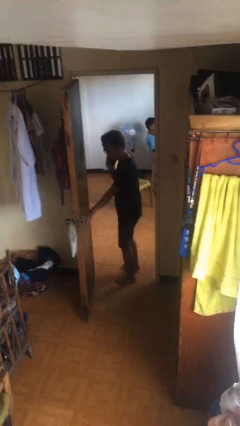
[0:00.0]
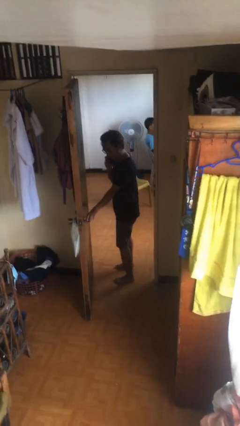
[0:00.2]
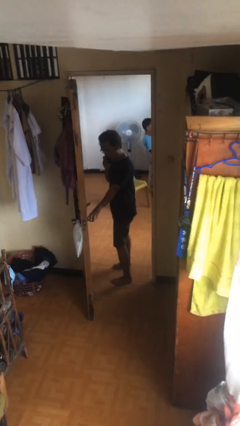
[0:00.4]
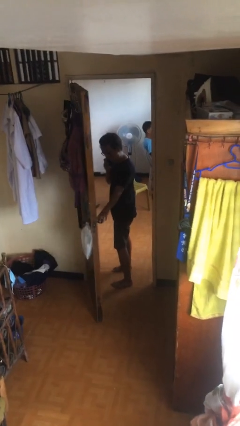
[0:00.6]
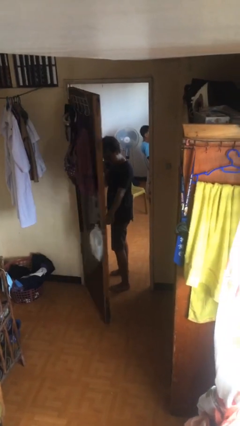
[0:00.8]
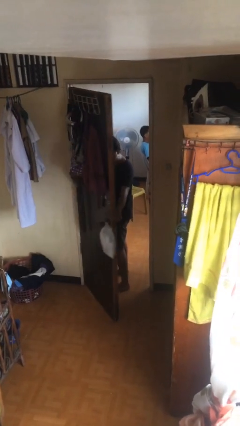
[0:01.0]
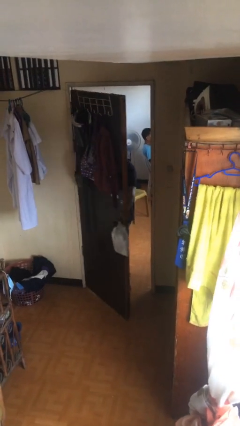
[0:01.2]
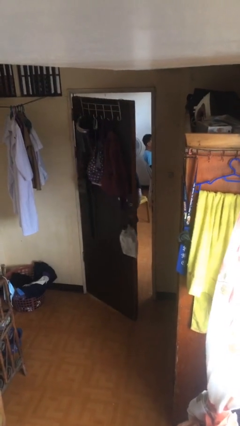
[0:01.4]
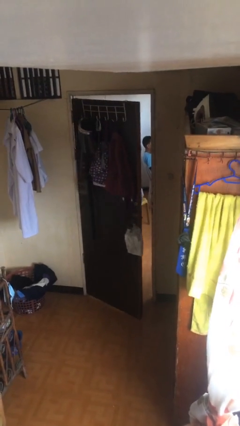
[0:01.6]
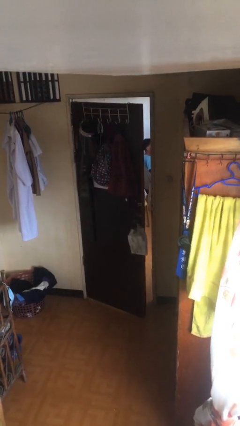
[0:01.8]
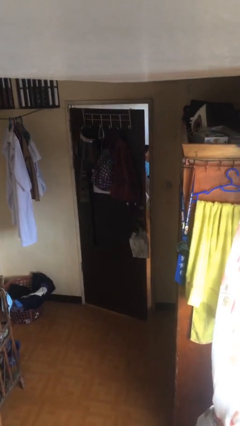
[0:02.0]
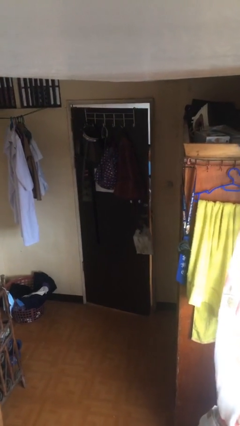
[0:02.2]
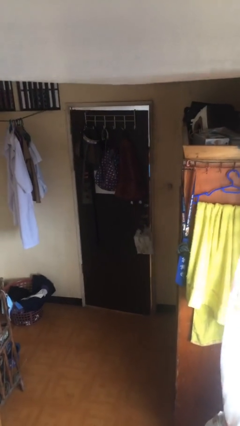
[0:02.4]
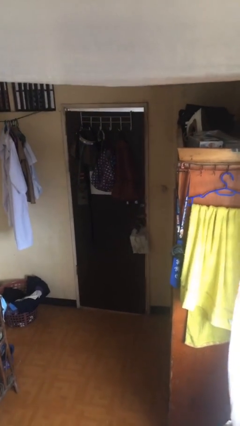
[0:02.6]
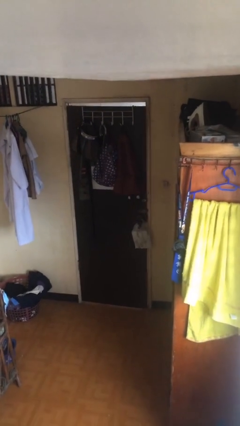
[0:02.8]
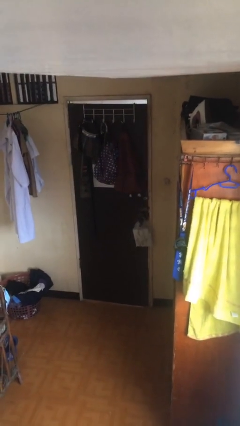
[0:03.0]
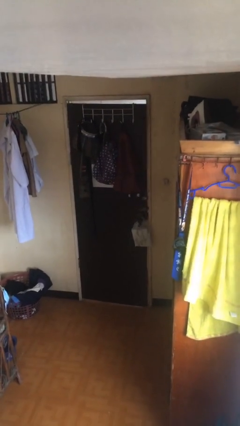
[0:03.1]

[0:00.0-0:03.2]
person closes facility door

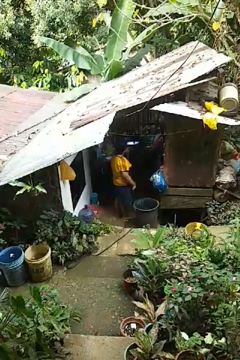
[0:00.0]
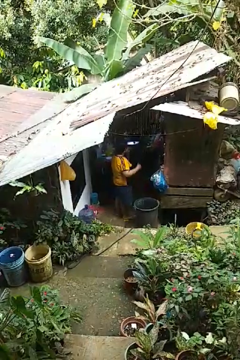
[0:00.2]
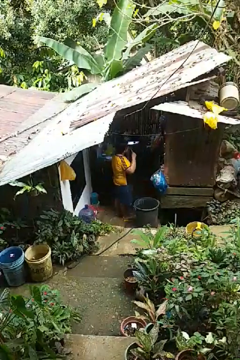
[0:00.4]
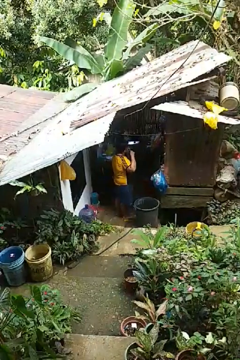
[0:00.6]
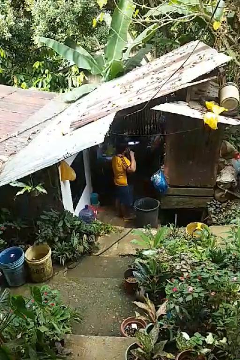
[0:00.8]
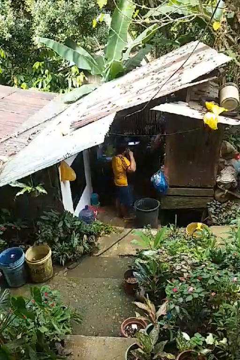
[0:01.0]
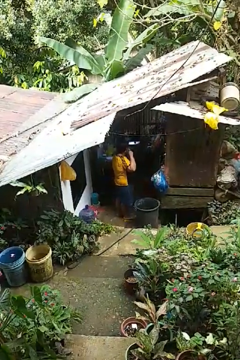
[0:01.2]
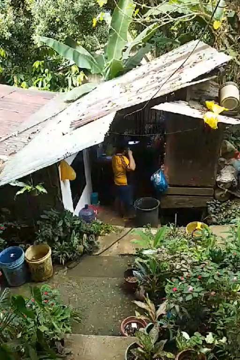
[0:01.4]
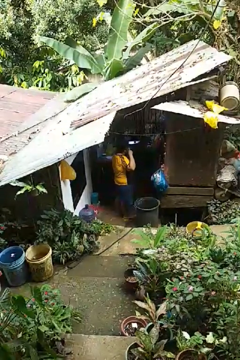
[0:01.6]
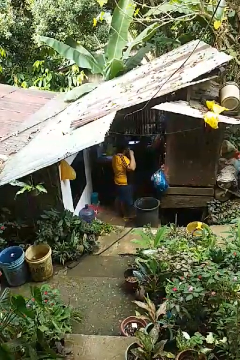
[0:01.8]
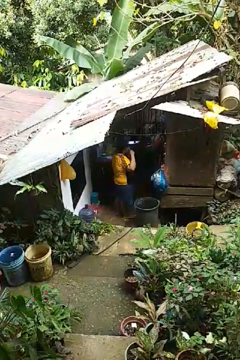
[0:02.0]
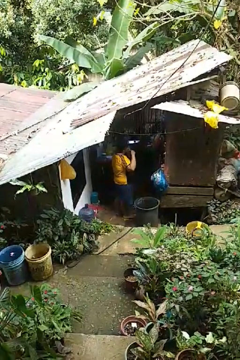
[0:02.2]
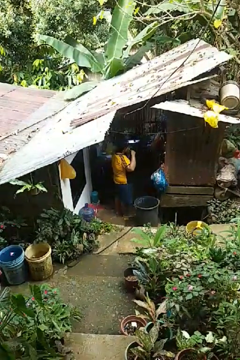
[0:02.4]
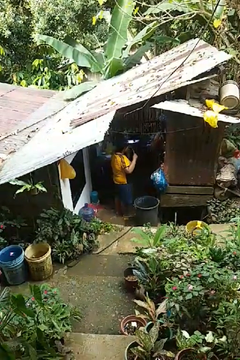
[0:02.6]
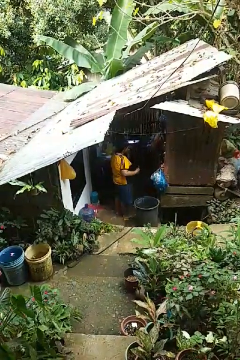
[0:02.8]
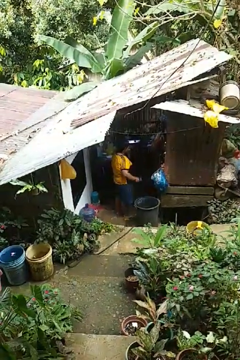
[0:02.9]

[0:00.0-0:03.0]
person brushes teeth

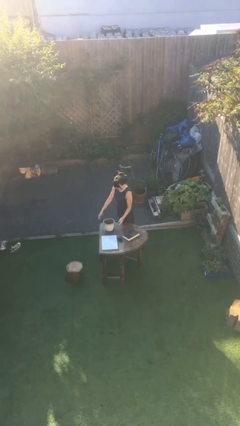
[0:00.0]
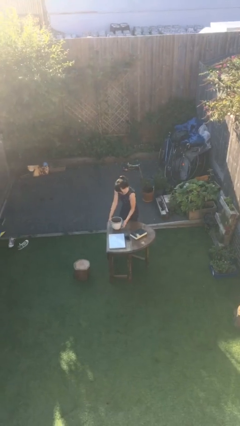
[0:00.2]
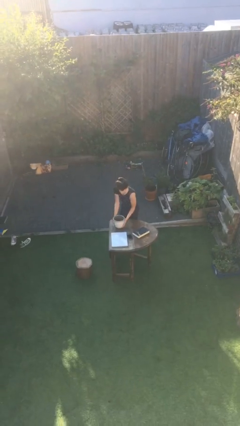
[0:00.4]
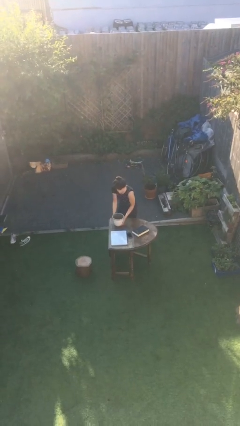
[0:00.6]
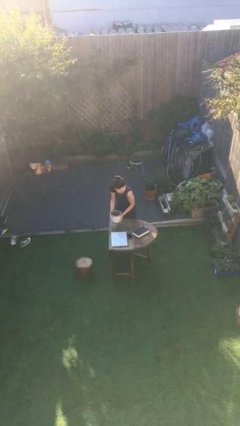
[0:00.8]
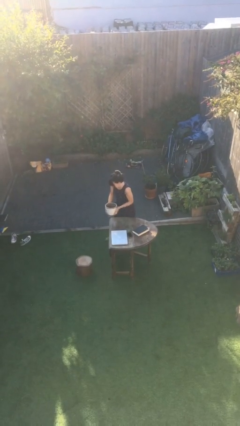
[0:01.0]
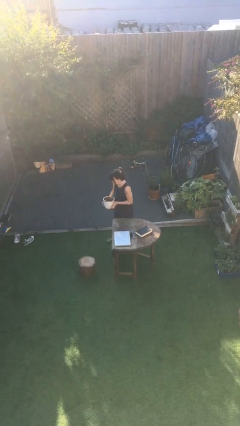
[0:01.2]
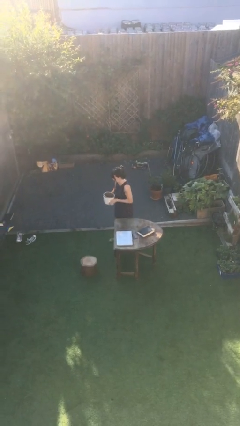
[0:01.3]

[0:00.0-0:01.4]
person picks up object from table

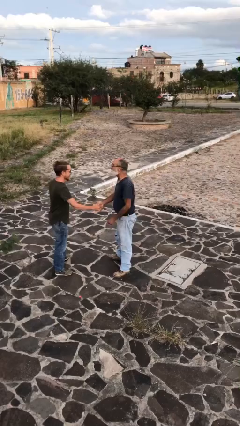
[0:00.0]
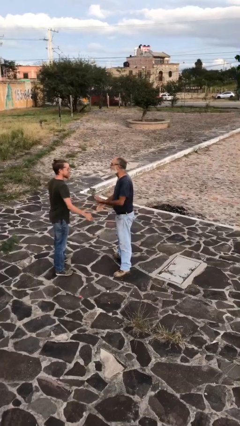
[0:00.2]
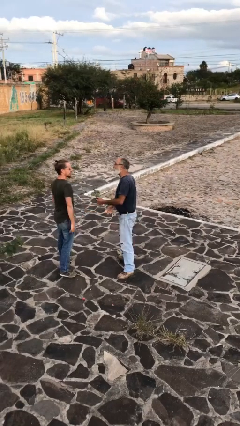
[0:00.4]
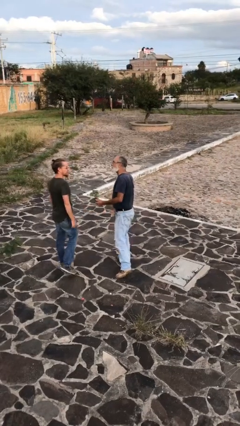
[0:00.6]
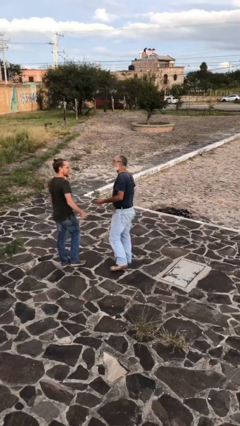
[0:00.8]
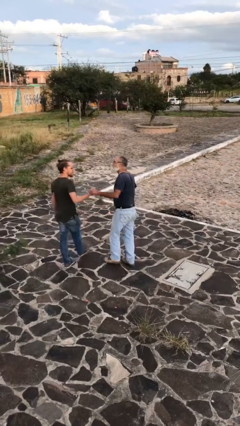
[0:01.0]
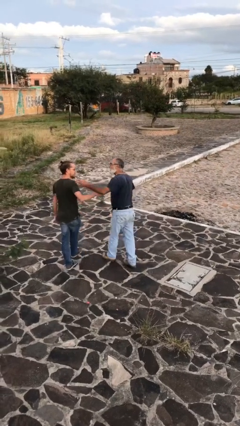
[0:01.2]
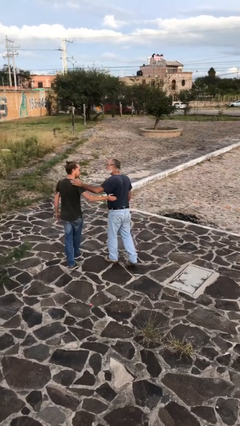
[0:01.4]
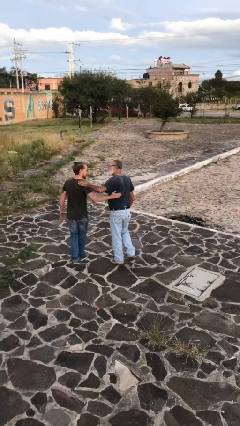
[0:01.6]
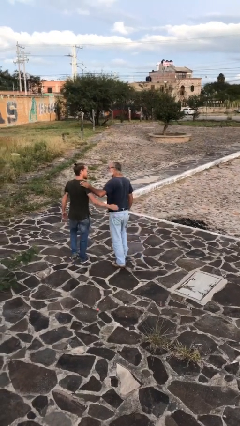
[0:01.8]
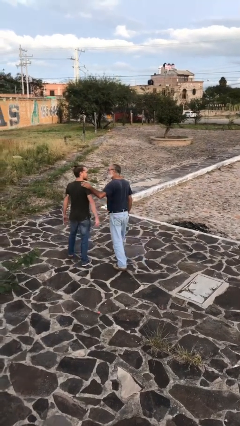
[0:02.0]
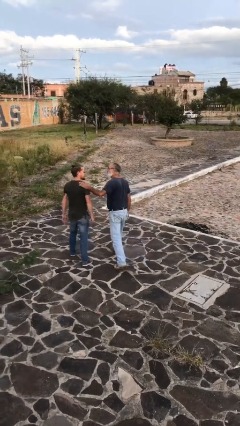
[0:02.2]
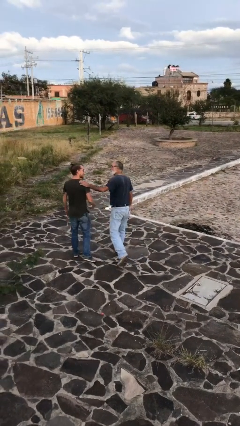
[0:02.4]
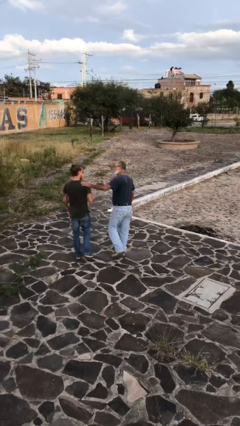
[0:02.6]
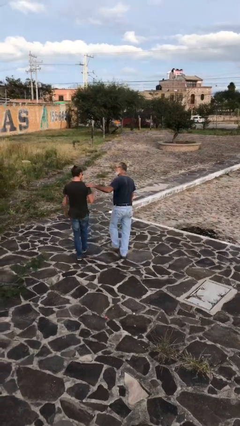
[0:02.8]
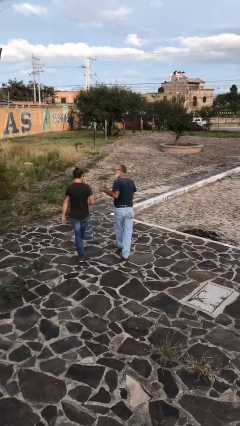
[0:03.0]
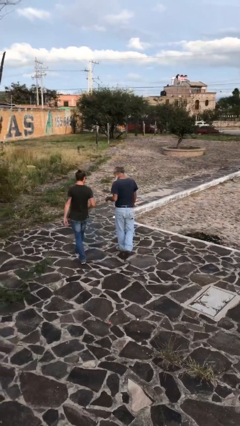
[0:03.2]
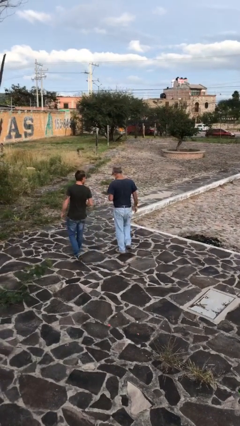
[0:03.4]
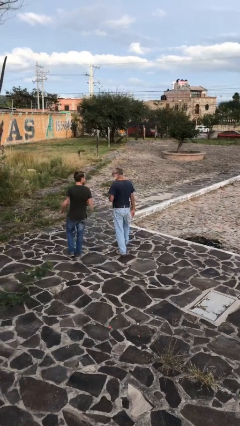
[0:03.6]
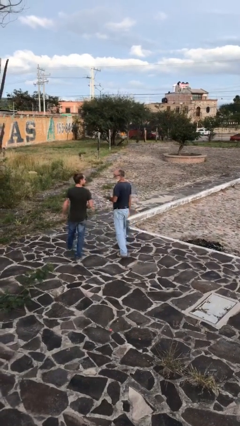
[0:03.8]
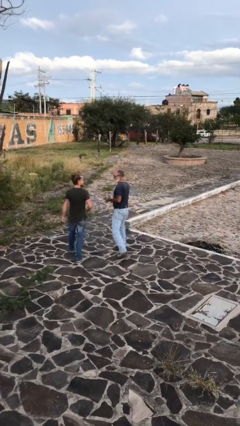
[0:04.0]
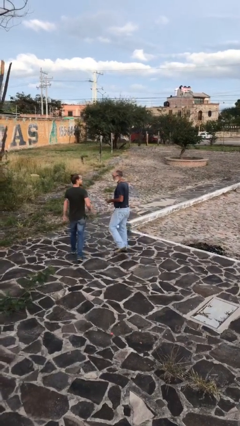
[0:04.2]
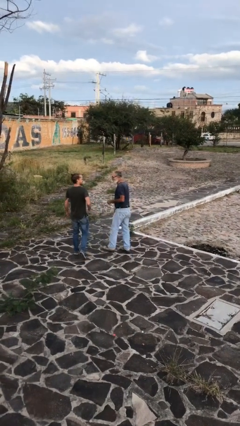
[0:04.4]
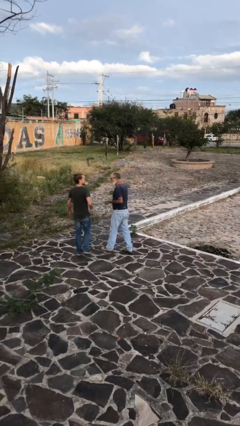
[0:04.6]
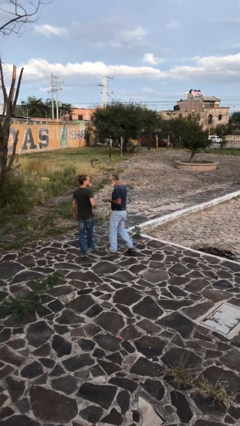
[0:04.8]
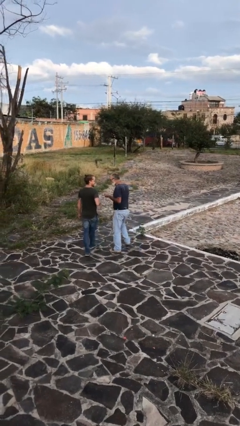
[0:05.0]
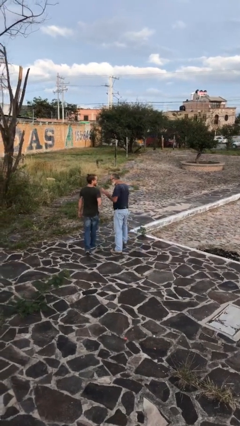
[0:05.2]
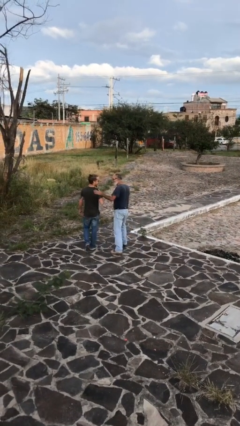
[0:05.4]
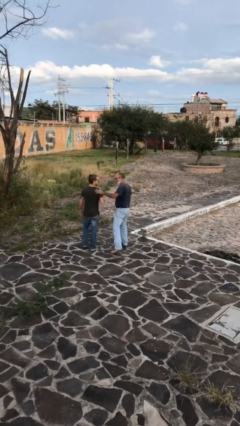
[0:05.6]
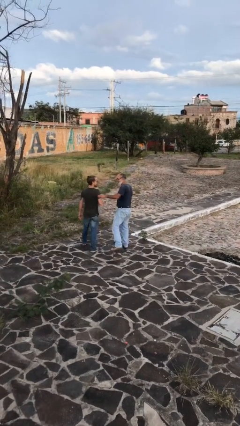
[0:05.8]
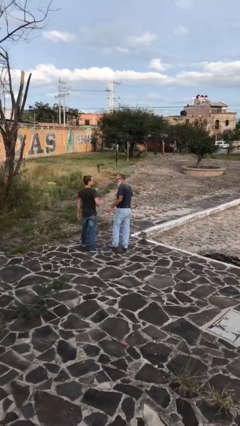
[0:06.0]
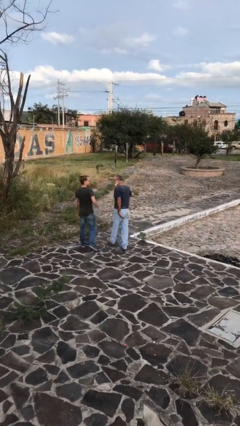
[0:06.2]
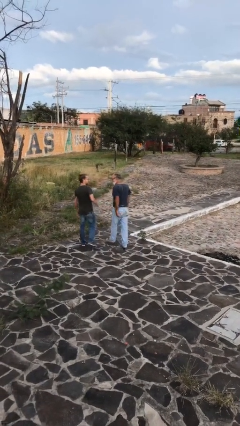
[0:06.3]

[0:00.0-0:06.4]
person talks to person

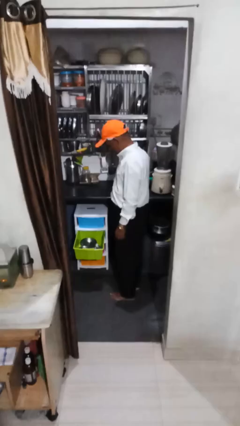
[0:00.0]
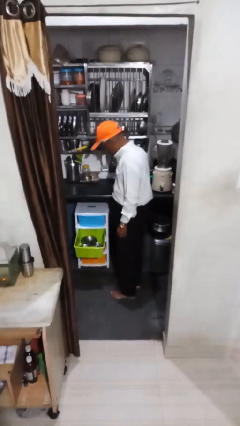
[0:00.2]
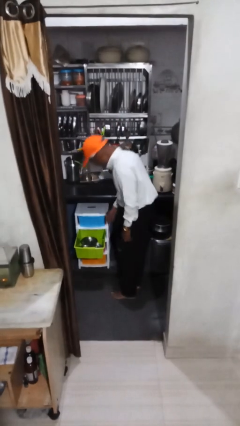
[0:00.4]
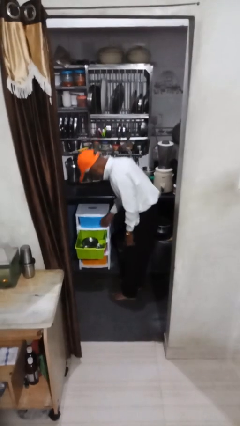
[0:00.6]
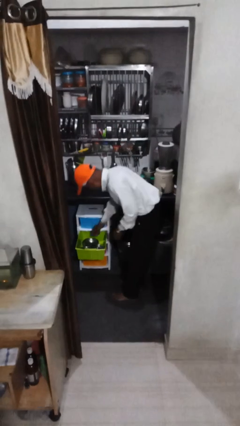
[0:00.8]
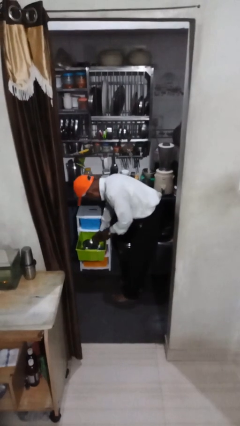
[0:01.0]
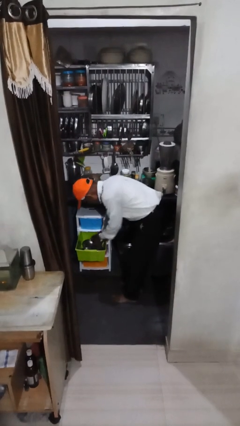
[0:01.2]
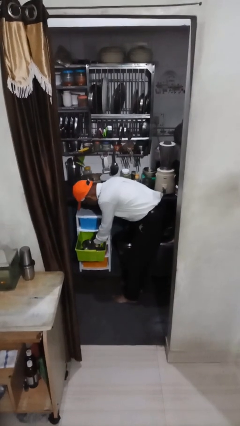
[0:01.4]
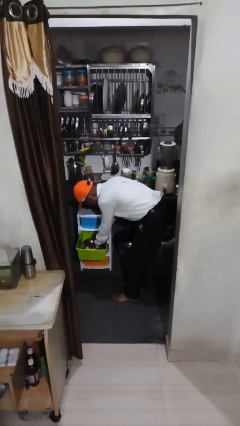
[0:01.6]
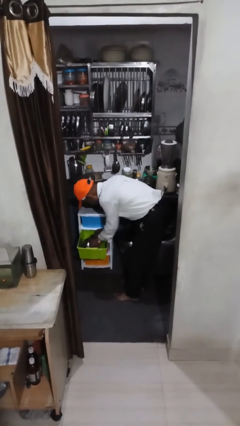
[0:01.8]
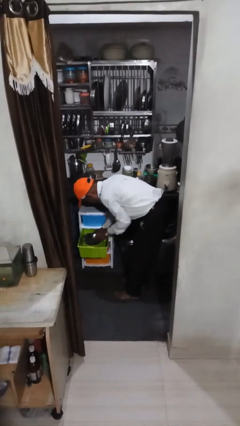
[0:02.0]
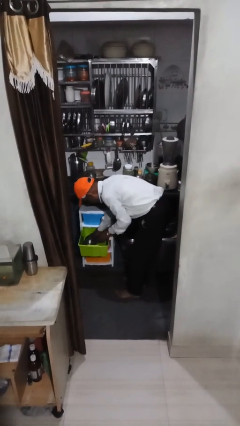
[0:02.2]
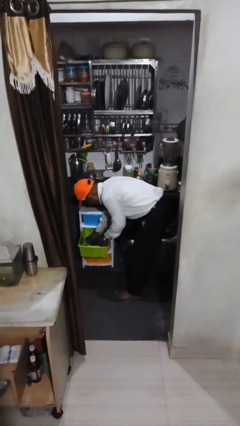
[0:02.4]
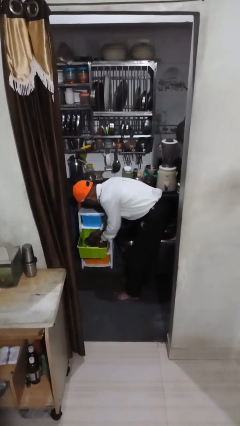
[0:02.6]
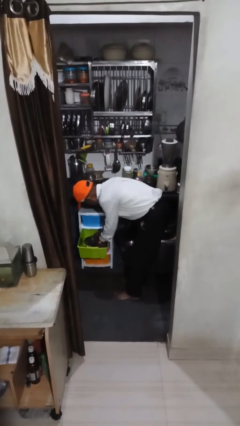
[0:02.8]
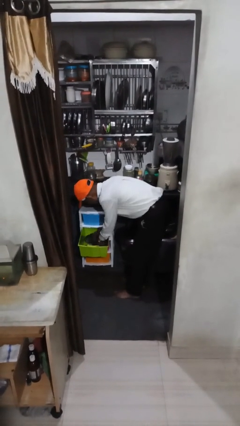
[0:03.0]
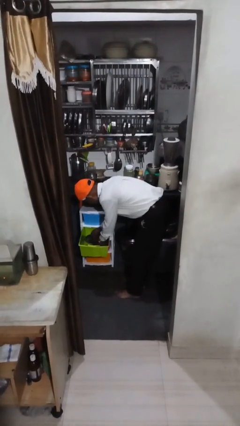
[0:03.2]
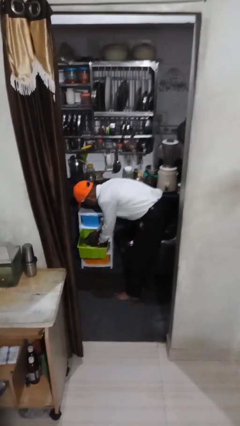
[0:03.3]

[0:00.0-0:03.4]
person searches in kitchen drawer

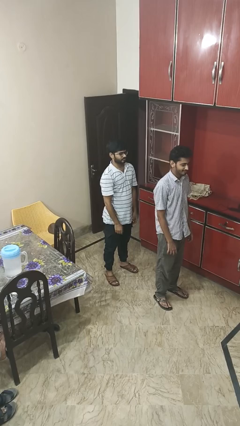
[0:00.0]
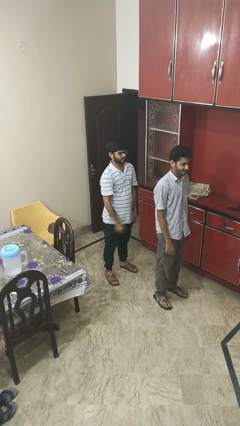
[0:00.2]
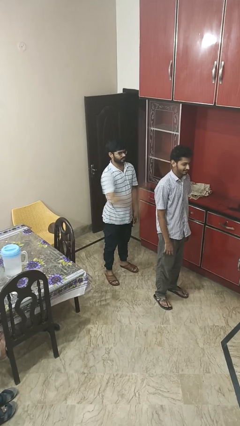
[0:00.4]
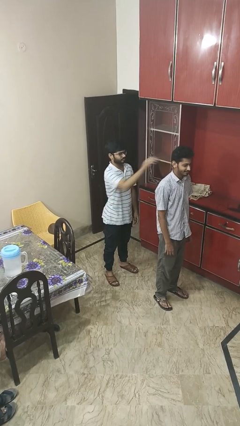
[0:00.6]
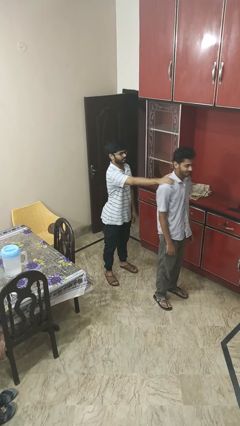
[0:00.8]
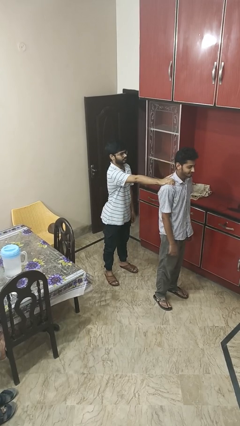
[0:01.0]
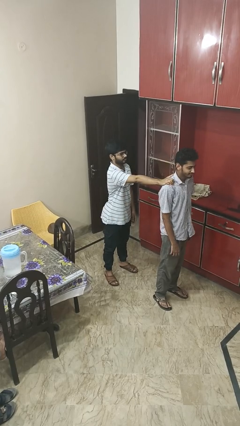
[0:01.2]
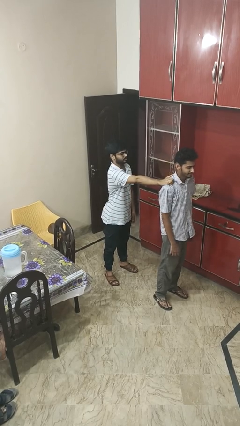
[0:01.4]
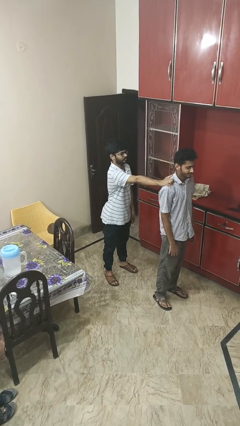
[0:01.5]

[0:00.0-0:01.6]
person grabs person by shoulder